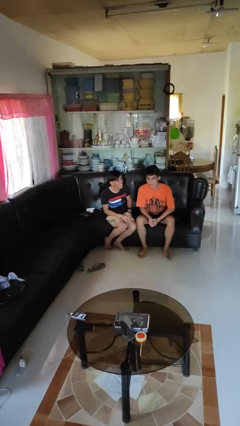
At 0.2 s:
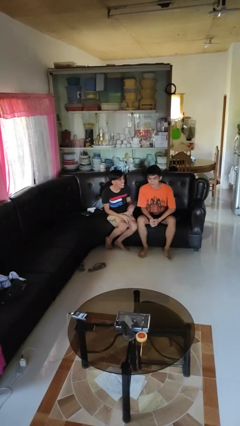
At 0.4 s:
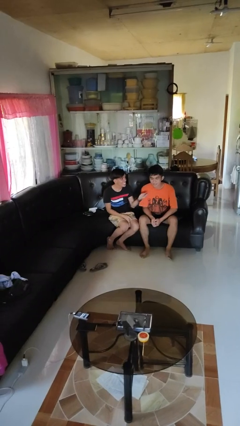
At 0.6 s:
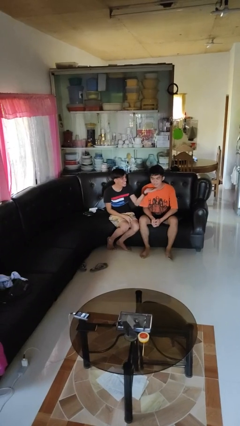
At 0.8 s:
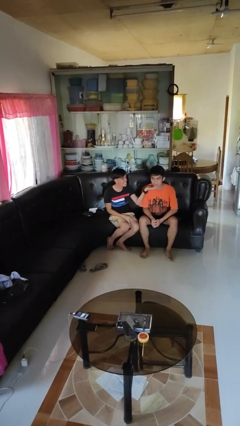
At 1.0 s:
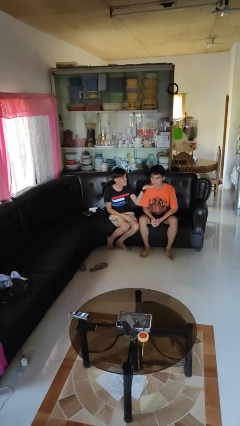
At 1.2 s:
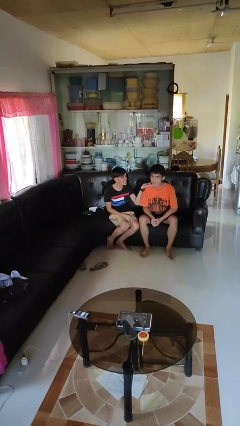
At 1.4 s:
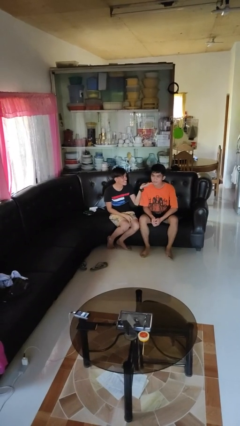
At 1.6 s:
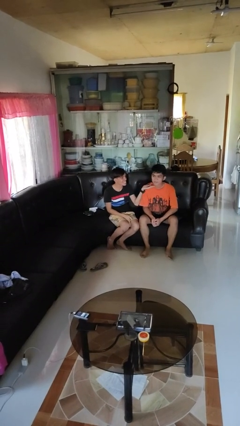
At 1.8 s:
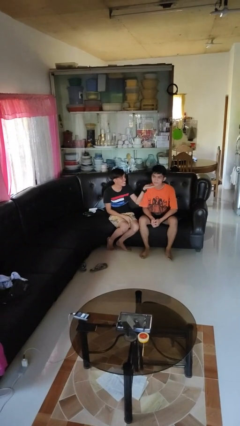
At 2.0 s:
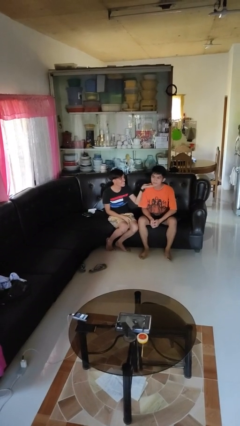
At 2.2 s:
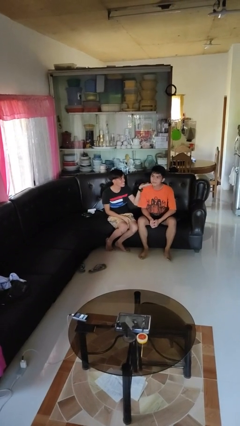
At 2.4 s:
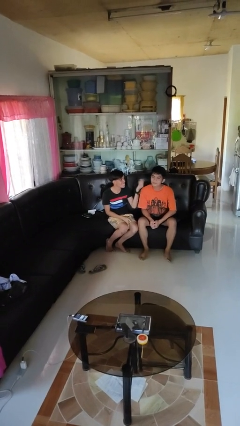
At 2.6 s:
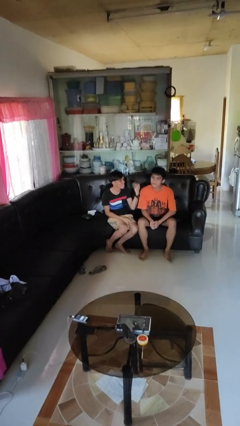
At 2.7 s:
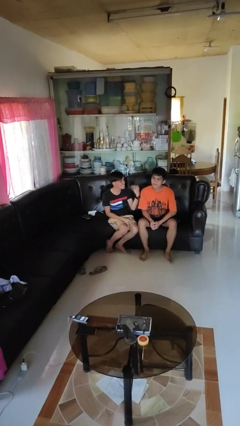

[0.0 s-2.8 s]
person touches face of person

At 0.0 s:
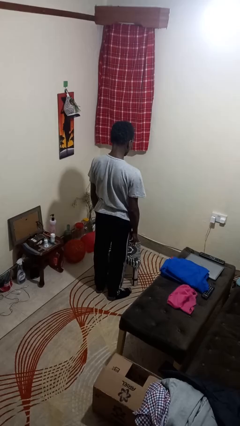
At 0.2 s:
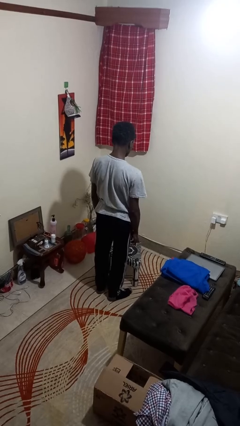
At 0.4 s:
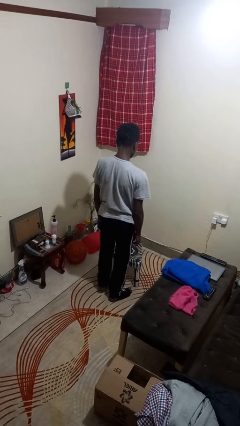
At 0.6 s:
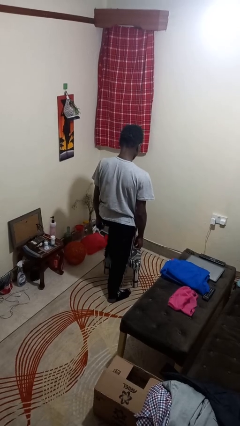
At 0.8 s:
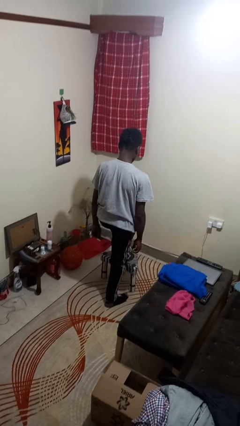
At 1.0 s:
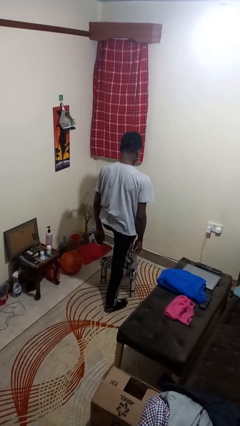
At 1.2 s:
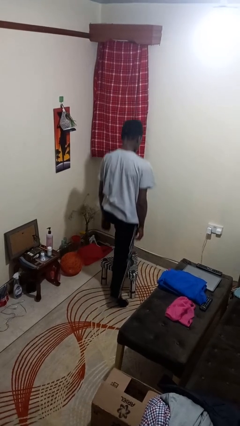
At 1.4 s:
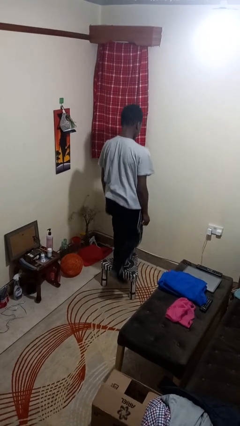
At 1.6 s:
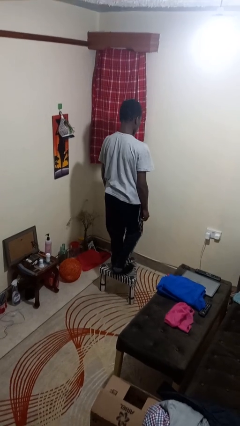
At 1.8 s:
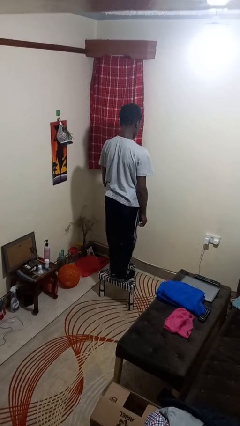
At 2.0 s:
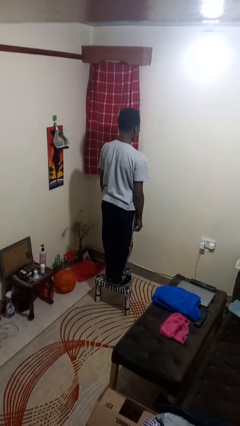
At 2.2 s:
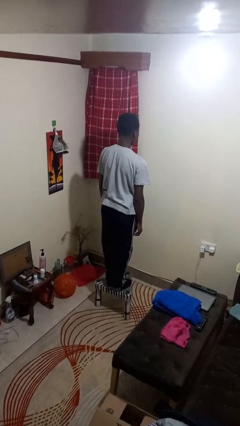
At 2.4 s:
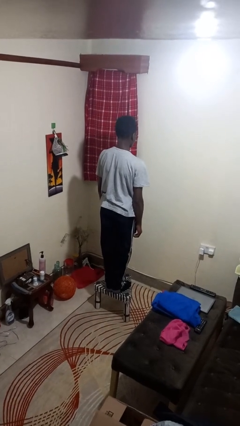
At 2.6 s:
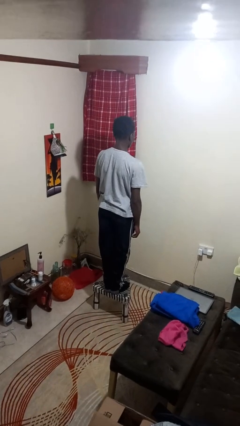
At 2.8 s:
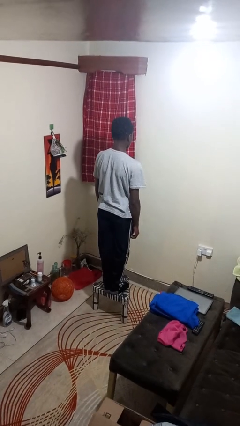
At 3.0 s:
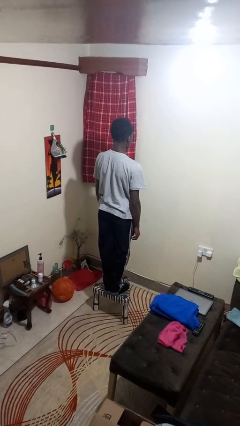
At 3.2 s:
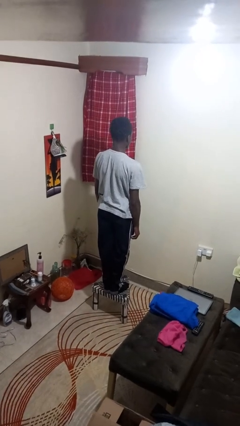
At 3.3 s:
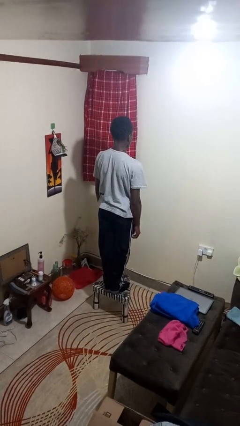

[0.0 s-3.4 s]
person climbs on chair

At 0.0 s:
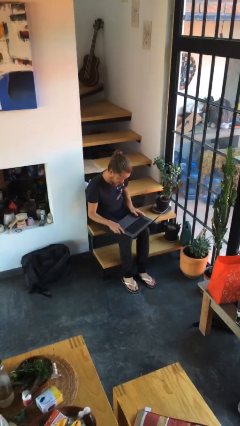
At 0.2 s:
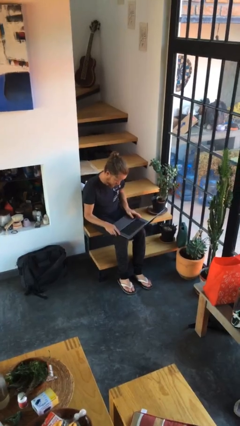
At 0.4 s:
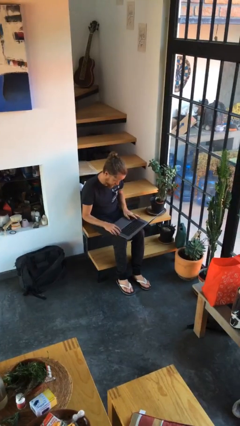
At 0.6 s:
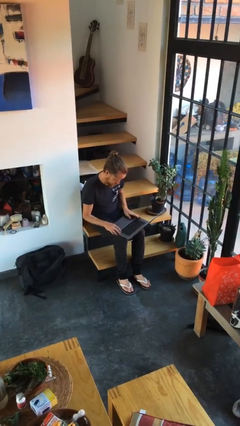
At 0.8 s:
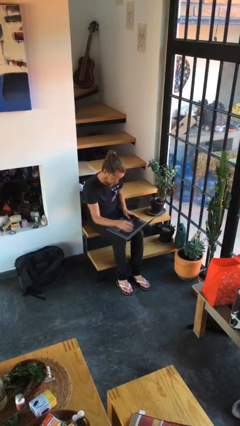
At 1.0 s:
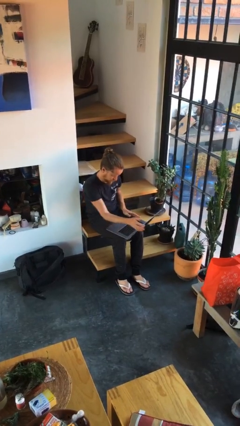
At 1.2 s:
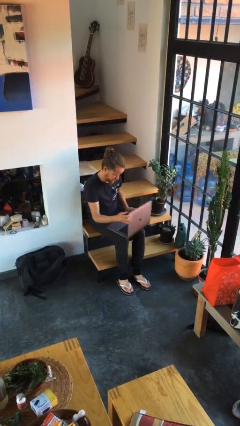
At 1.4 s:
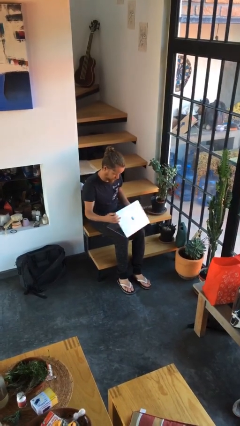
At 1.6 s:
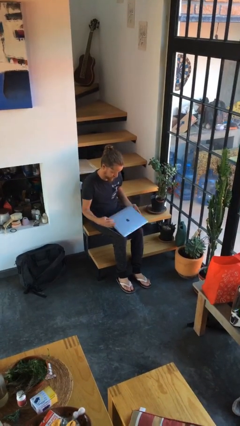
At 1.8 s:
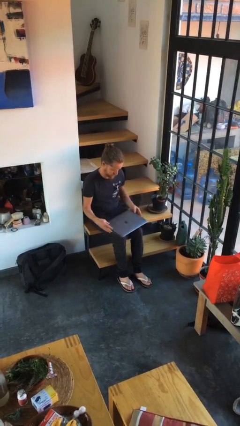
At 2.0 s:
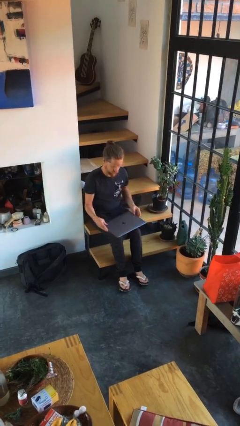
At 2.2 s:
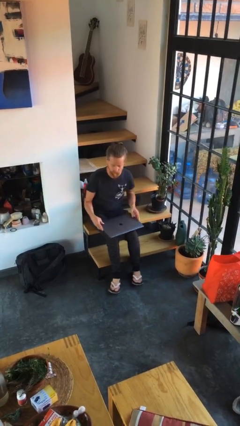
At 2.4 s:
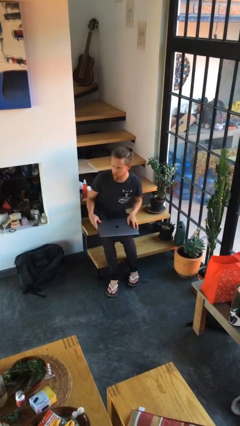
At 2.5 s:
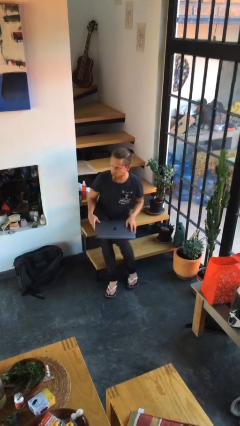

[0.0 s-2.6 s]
person closes laptop

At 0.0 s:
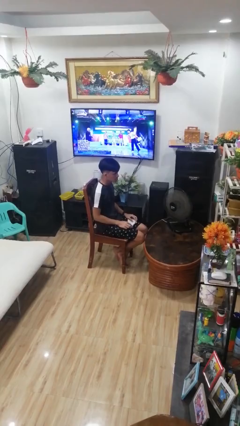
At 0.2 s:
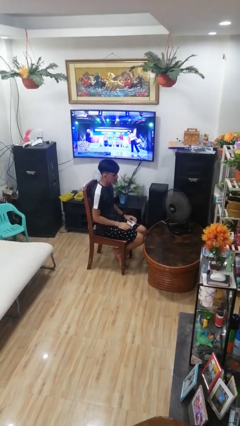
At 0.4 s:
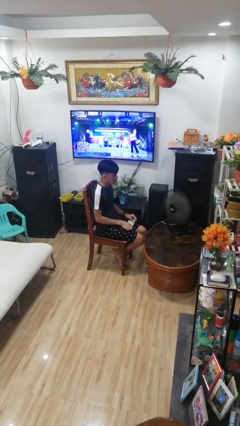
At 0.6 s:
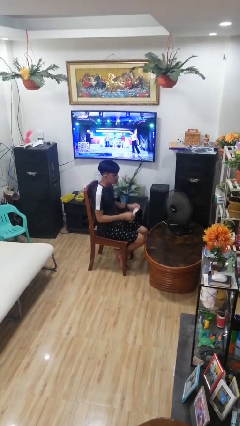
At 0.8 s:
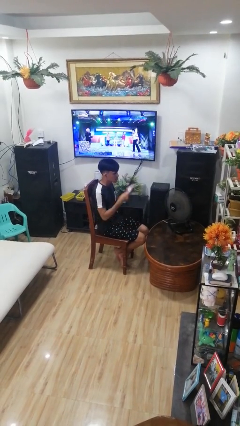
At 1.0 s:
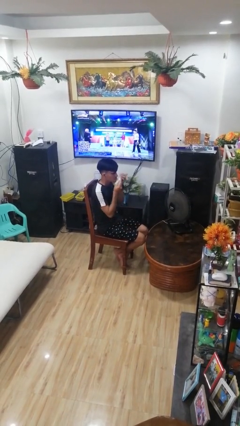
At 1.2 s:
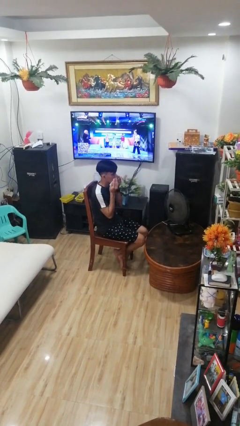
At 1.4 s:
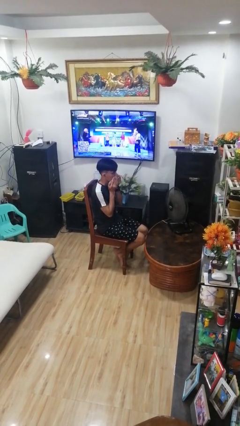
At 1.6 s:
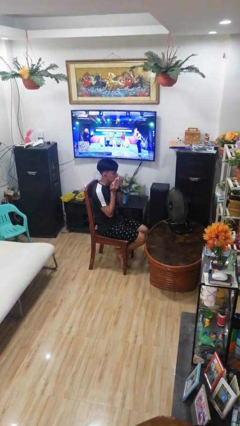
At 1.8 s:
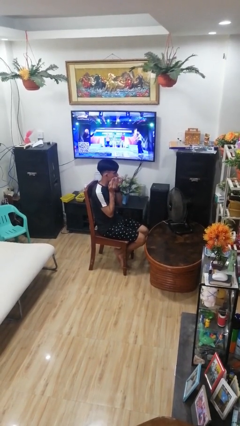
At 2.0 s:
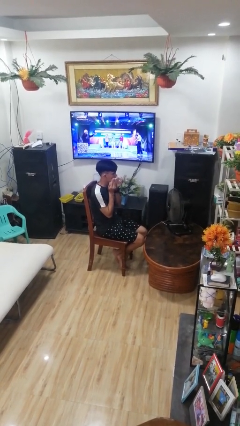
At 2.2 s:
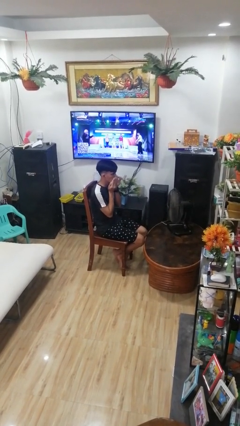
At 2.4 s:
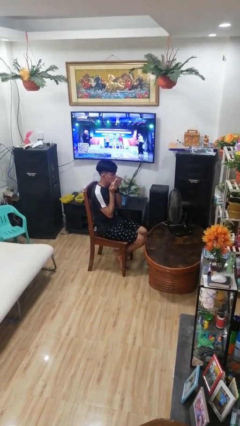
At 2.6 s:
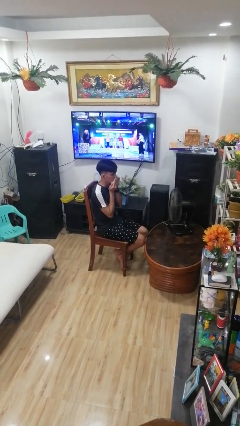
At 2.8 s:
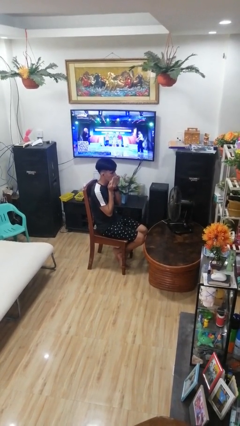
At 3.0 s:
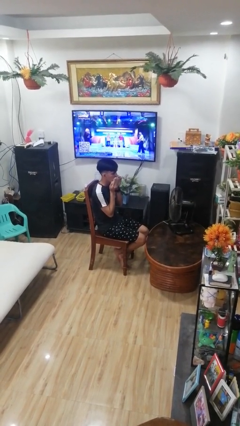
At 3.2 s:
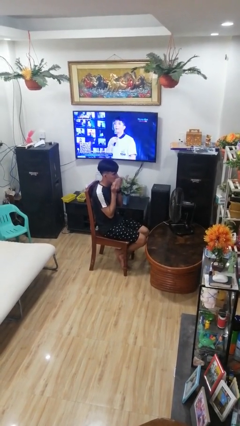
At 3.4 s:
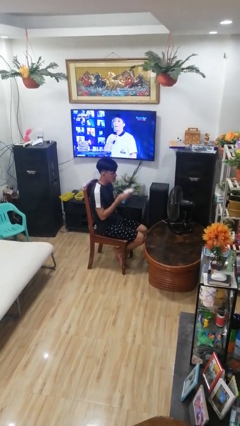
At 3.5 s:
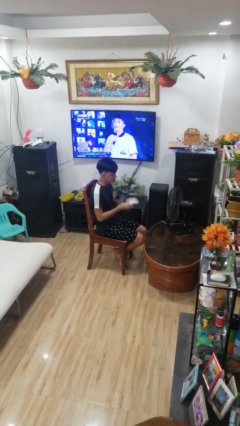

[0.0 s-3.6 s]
person wipes mouth with napkin

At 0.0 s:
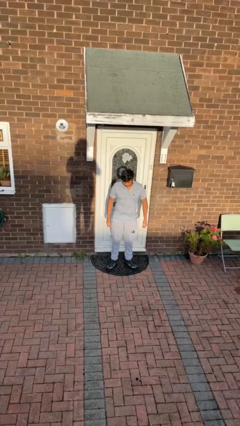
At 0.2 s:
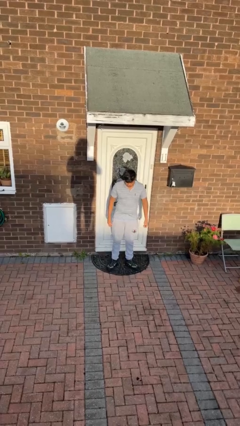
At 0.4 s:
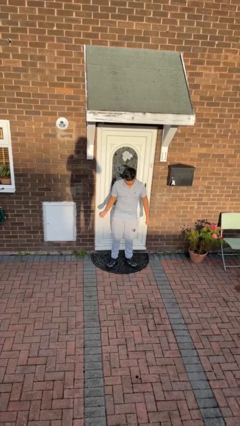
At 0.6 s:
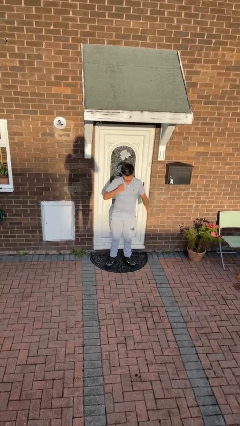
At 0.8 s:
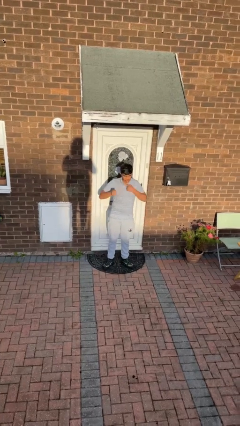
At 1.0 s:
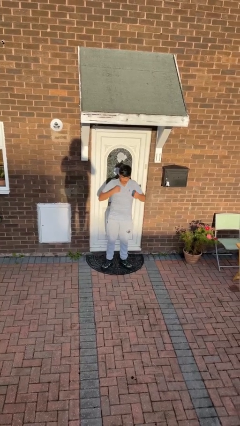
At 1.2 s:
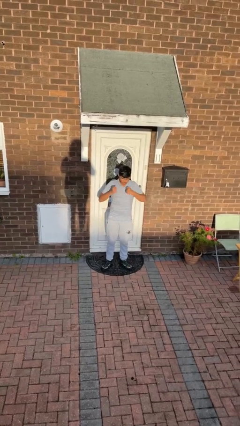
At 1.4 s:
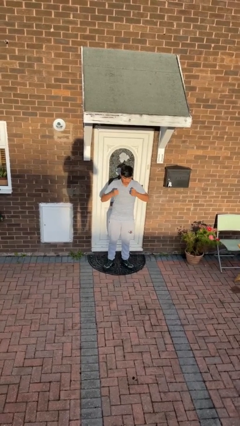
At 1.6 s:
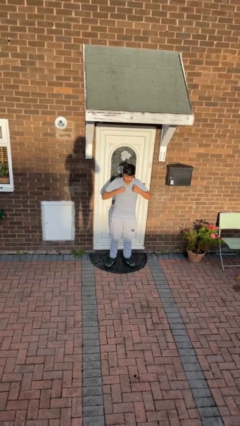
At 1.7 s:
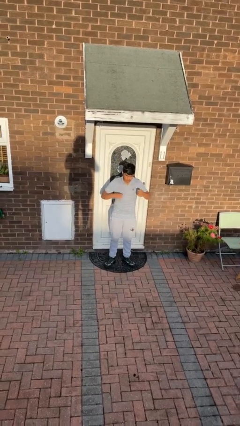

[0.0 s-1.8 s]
person drums on chest

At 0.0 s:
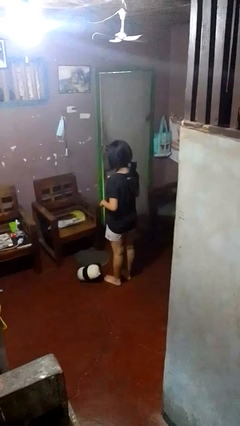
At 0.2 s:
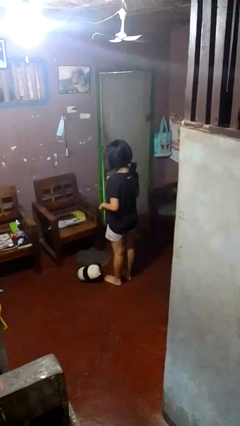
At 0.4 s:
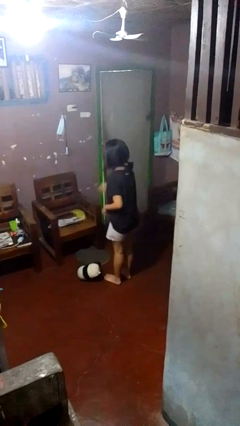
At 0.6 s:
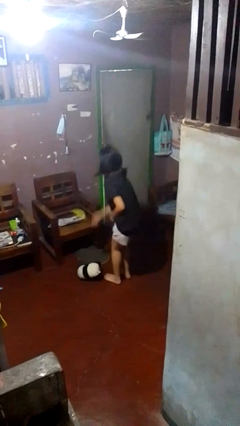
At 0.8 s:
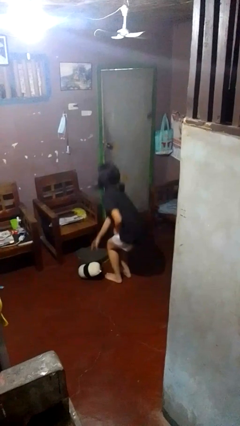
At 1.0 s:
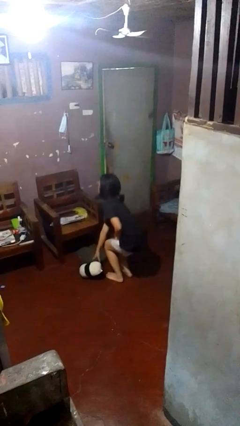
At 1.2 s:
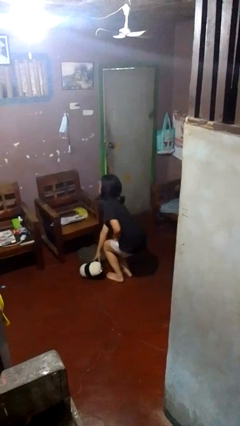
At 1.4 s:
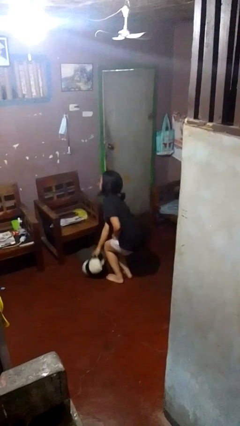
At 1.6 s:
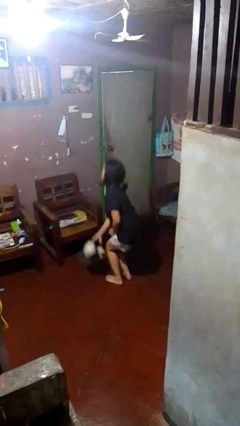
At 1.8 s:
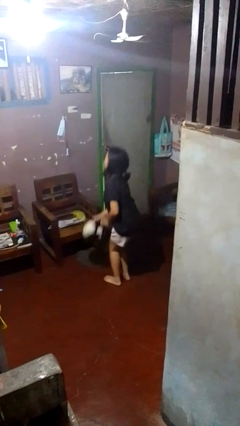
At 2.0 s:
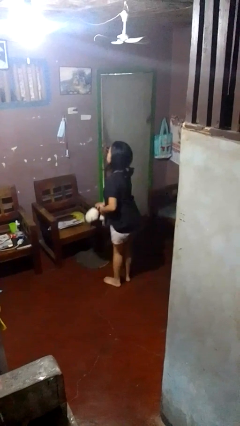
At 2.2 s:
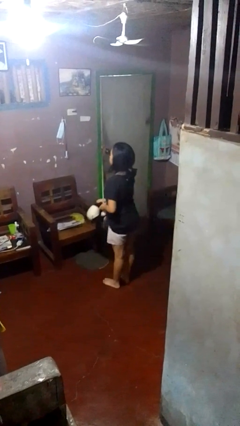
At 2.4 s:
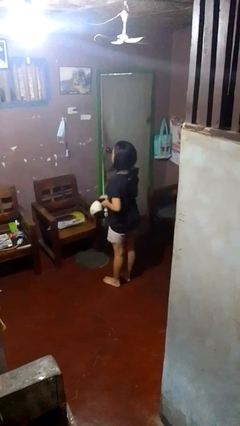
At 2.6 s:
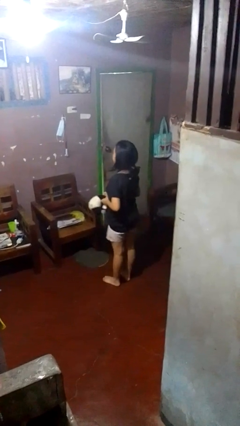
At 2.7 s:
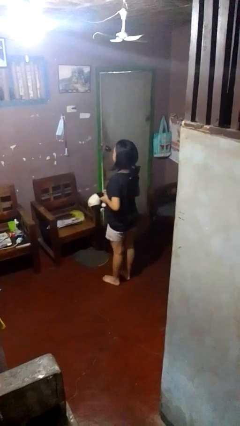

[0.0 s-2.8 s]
person picks up object from floor

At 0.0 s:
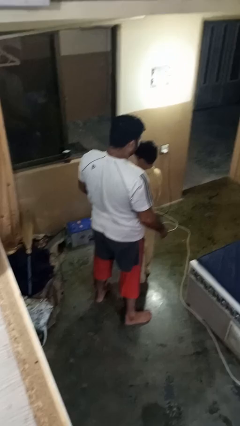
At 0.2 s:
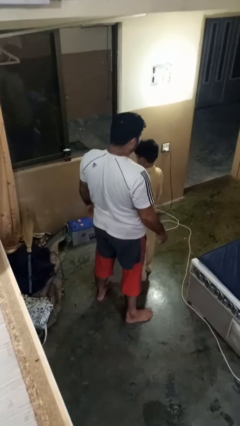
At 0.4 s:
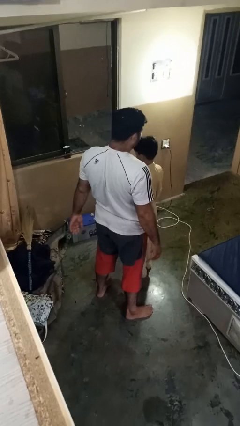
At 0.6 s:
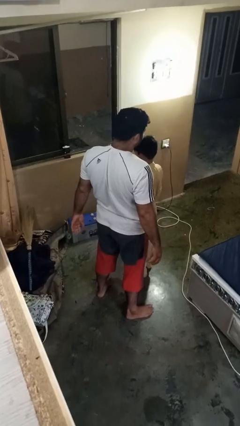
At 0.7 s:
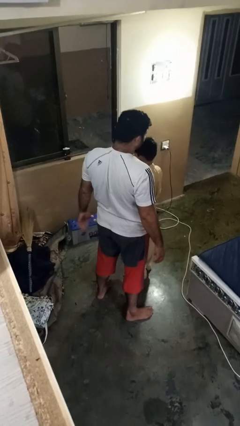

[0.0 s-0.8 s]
person puts down person
